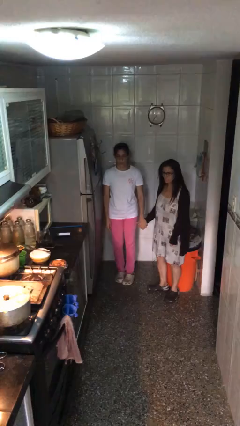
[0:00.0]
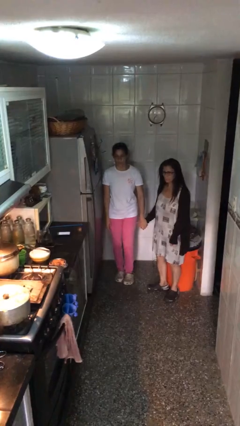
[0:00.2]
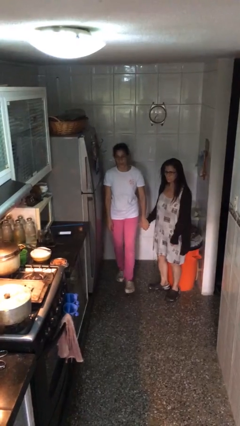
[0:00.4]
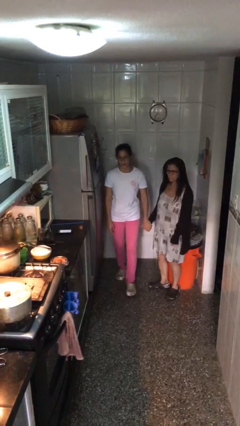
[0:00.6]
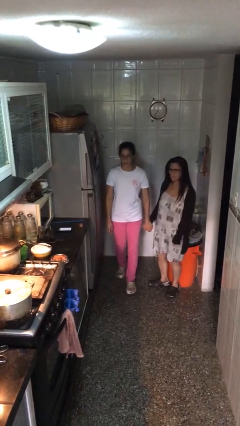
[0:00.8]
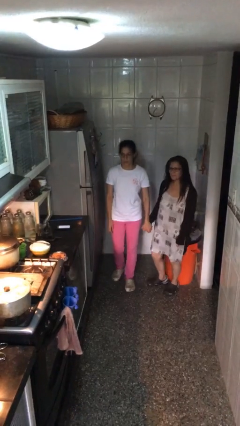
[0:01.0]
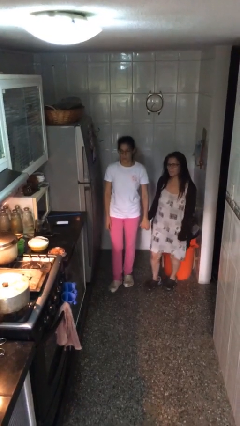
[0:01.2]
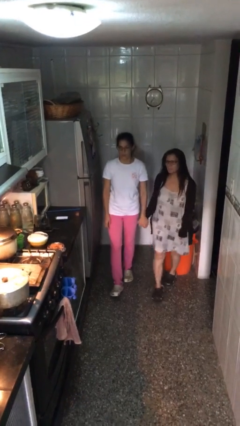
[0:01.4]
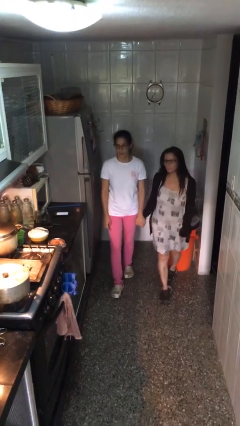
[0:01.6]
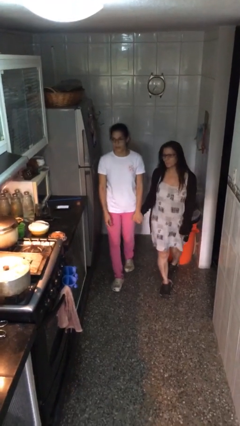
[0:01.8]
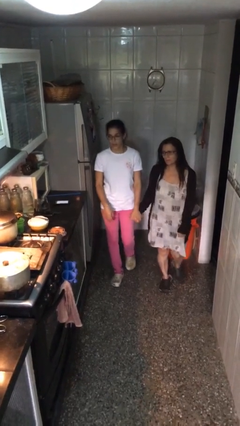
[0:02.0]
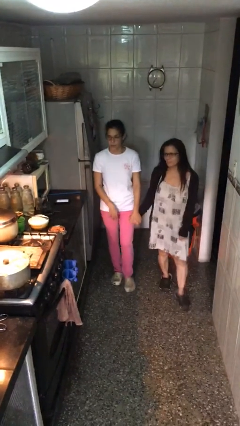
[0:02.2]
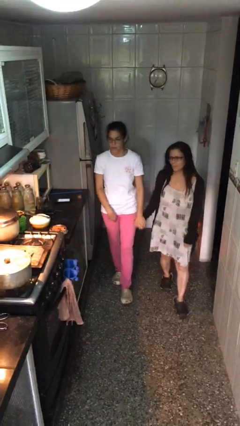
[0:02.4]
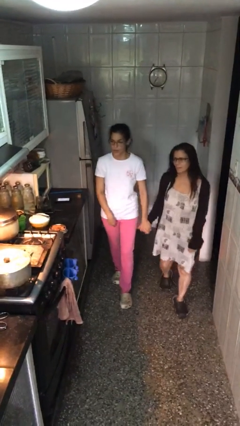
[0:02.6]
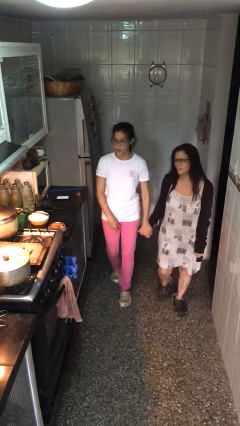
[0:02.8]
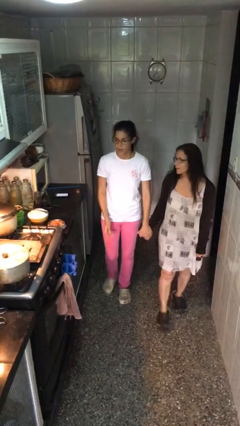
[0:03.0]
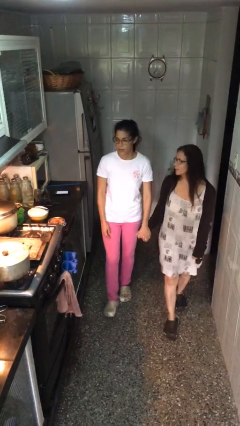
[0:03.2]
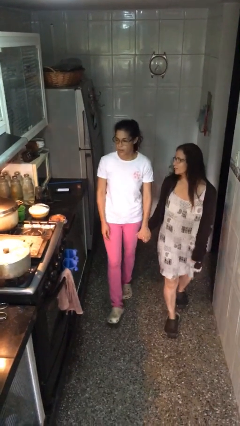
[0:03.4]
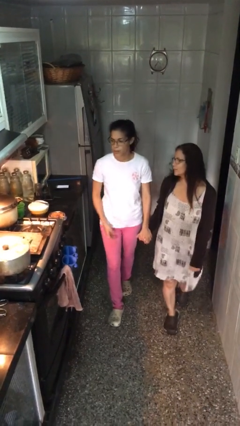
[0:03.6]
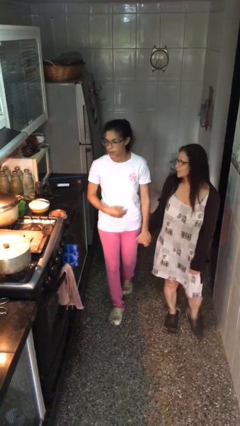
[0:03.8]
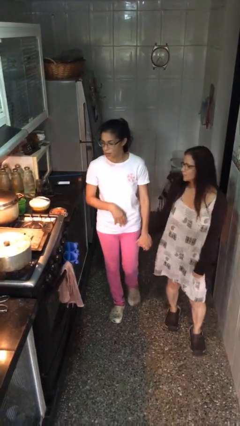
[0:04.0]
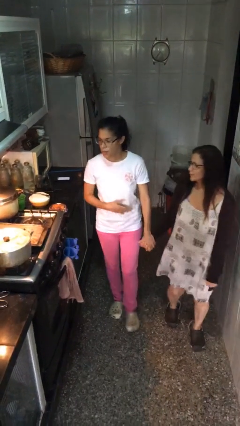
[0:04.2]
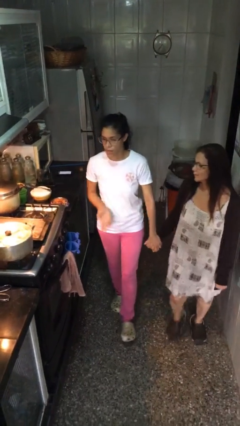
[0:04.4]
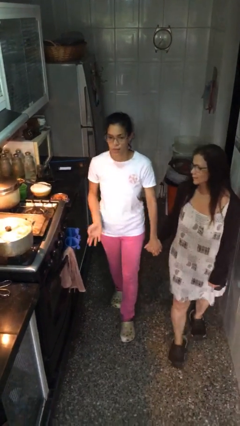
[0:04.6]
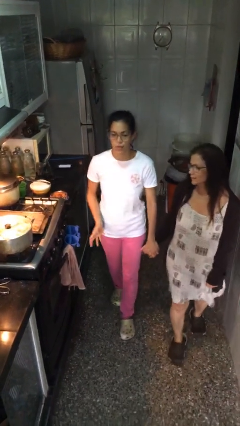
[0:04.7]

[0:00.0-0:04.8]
person holds hand

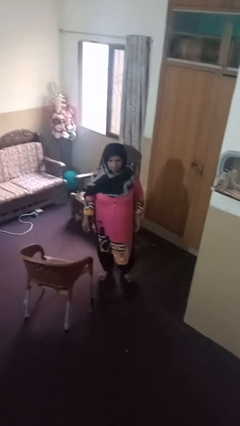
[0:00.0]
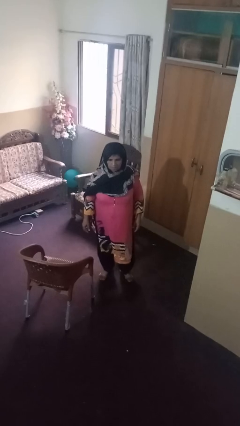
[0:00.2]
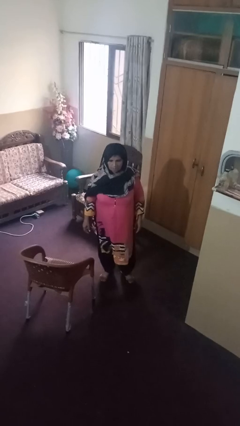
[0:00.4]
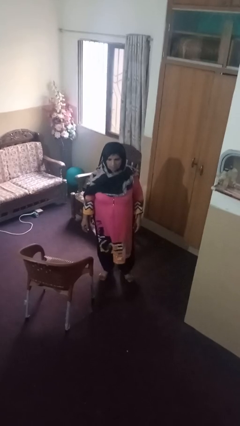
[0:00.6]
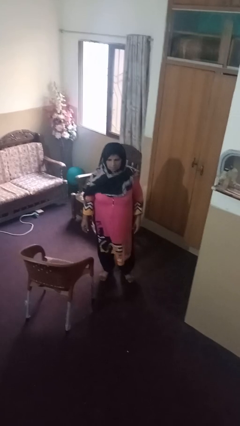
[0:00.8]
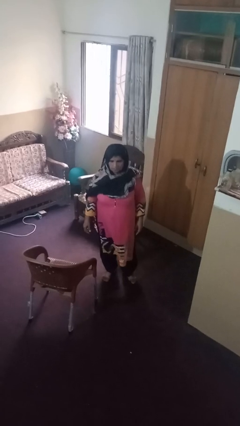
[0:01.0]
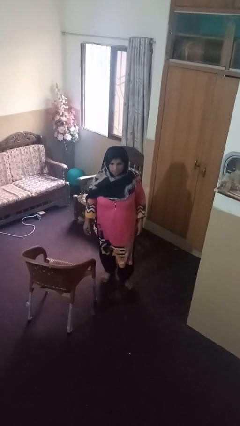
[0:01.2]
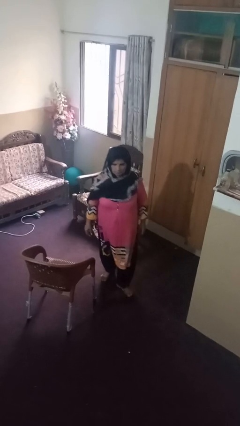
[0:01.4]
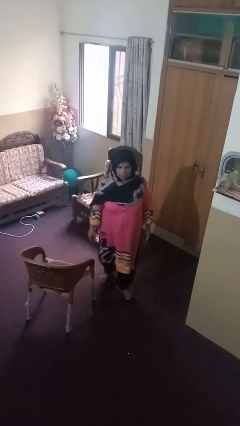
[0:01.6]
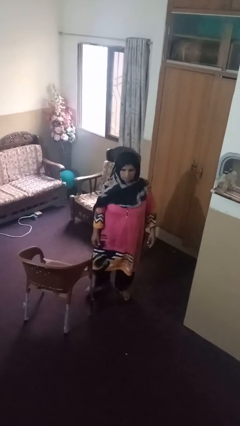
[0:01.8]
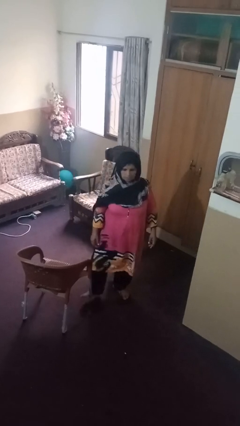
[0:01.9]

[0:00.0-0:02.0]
person trips on object on floor

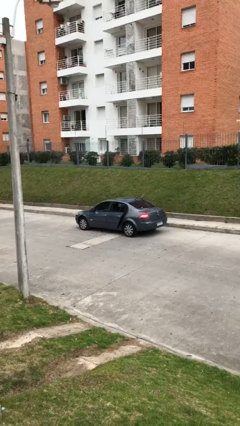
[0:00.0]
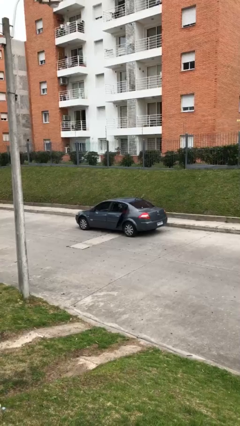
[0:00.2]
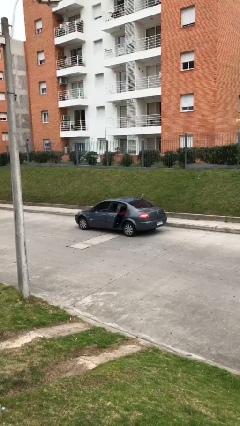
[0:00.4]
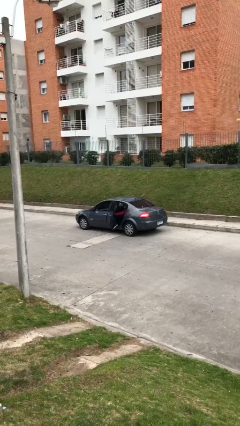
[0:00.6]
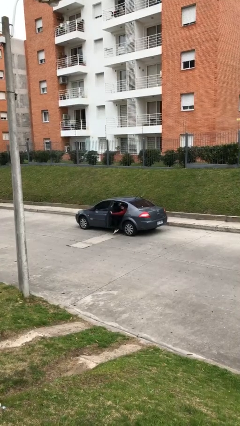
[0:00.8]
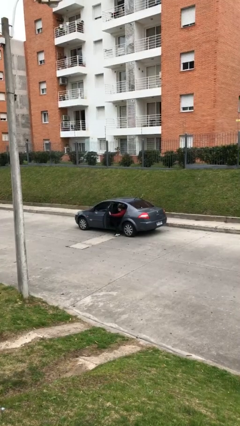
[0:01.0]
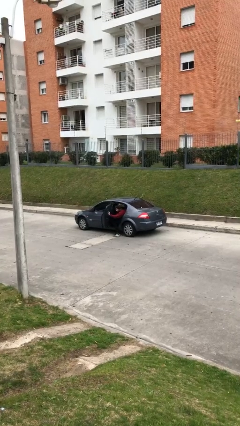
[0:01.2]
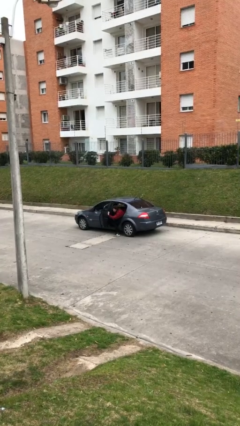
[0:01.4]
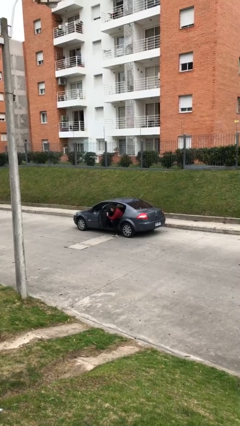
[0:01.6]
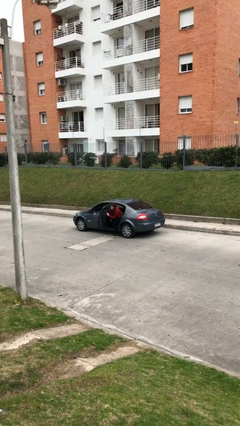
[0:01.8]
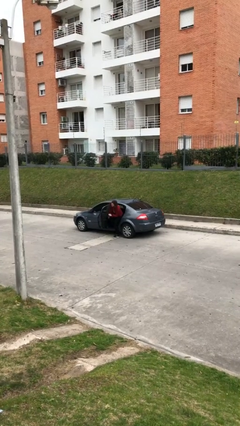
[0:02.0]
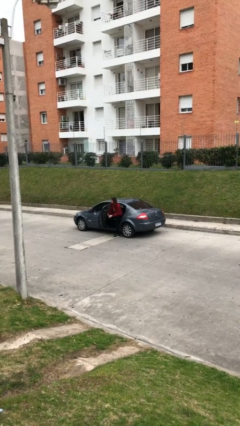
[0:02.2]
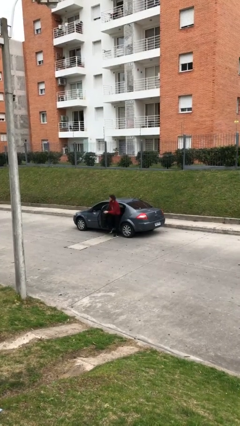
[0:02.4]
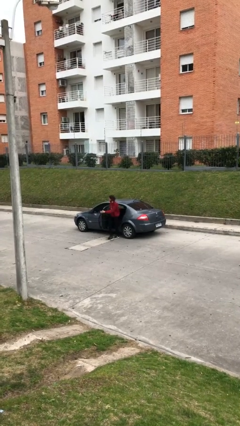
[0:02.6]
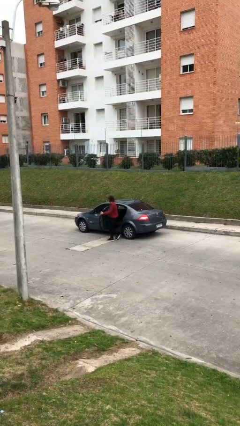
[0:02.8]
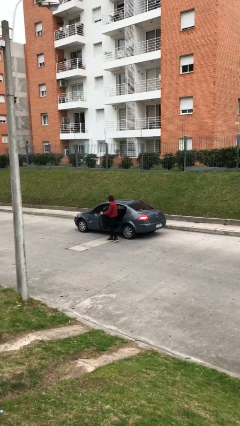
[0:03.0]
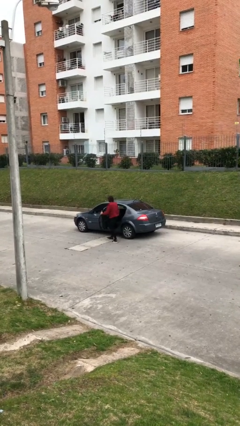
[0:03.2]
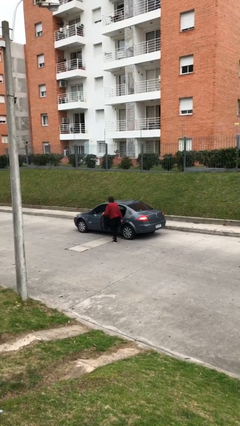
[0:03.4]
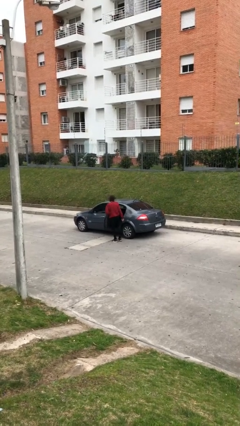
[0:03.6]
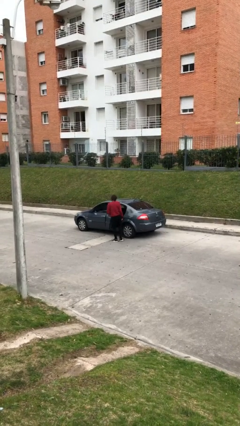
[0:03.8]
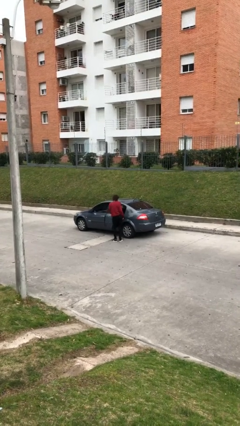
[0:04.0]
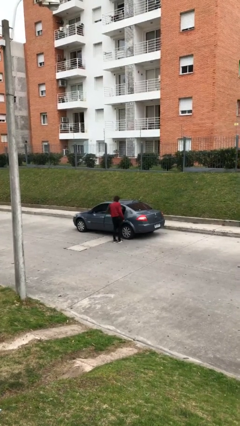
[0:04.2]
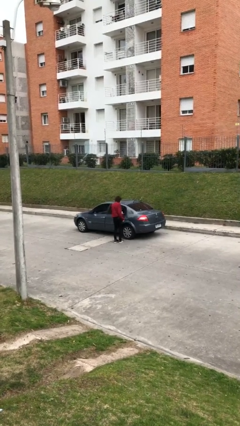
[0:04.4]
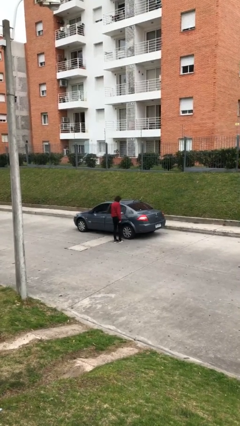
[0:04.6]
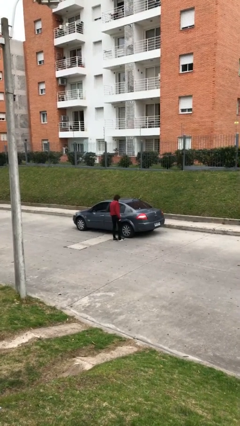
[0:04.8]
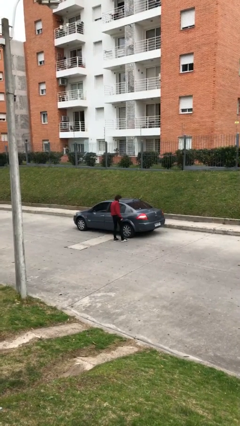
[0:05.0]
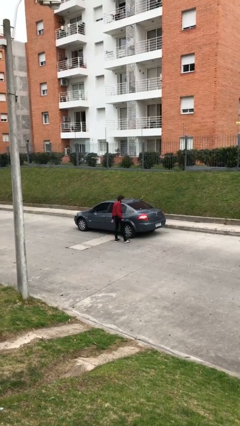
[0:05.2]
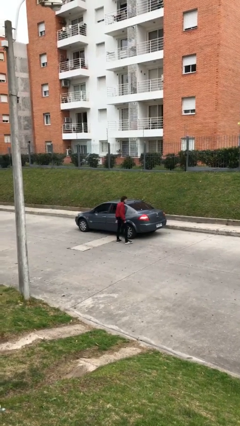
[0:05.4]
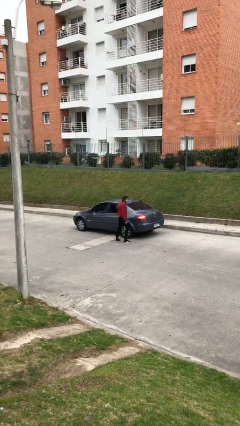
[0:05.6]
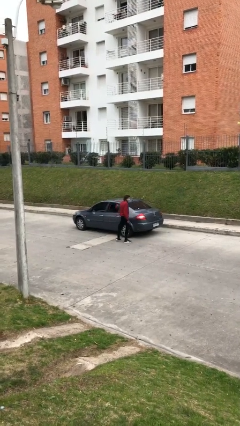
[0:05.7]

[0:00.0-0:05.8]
car drops off person

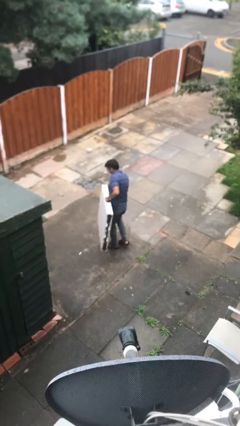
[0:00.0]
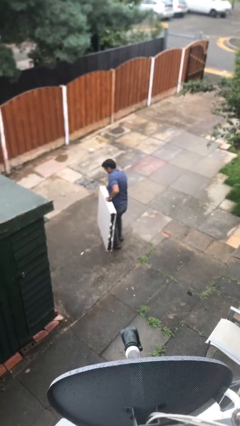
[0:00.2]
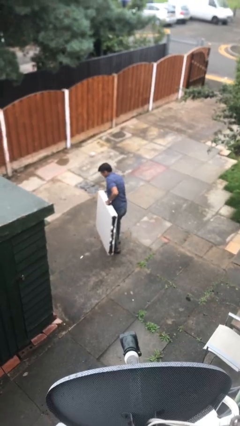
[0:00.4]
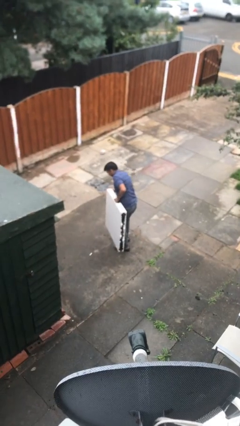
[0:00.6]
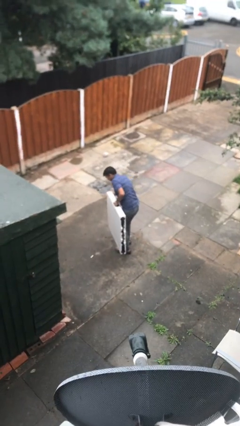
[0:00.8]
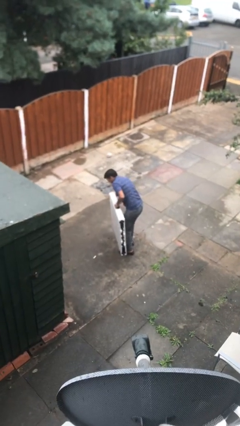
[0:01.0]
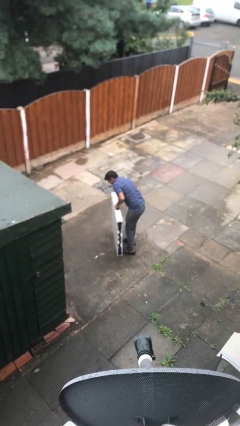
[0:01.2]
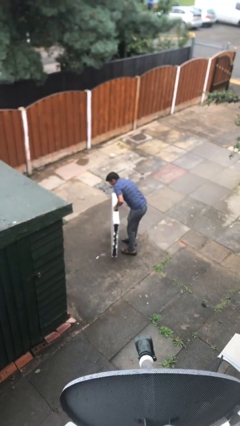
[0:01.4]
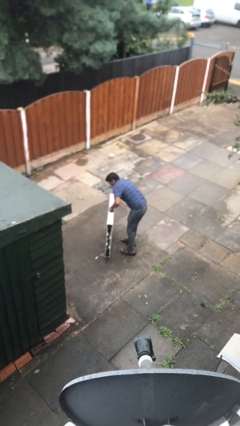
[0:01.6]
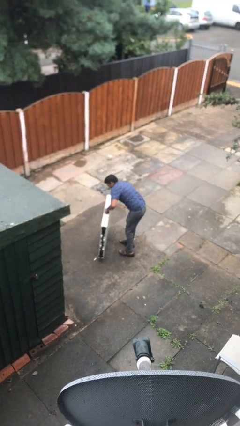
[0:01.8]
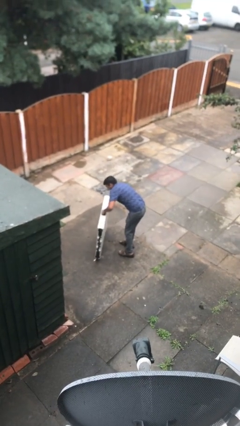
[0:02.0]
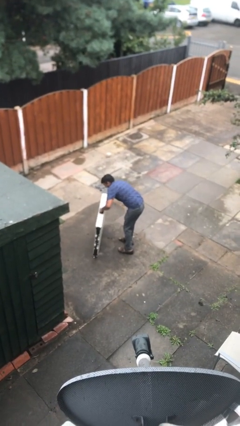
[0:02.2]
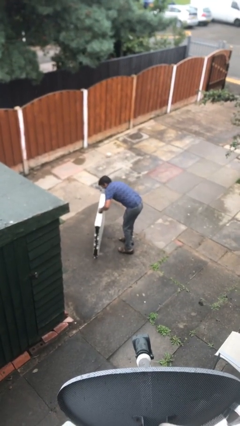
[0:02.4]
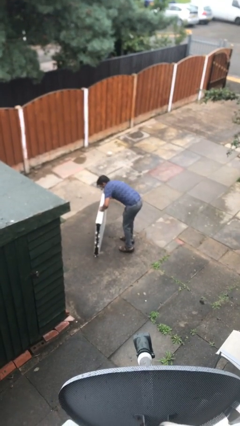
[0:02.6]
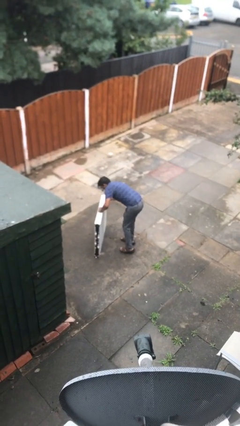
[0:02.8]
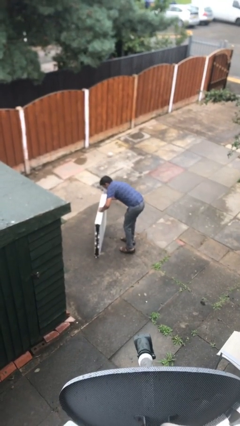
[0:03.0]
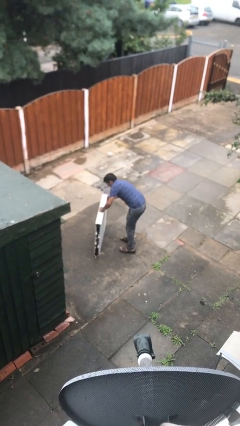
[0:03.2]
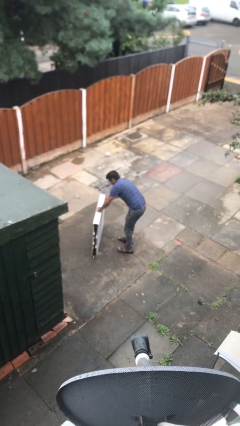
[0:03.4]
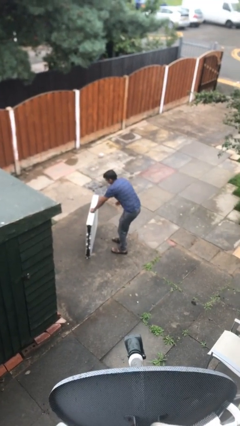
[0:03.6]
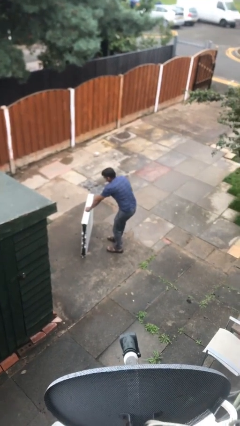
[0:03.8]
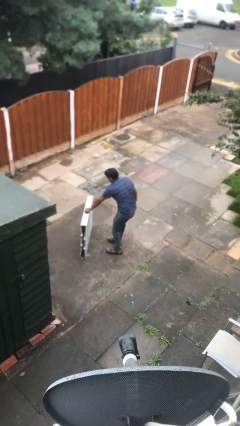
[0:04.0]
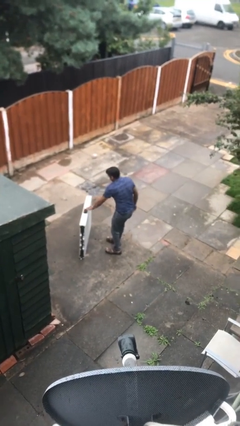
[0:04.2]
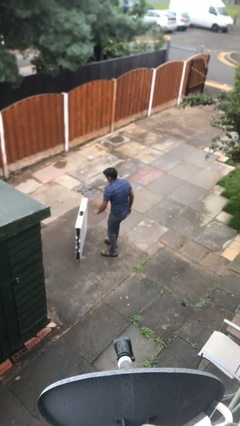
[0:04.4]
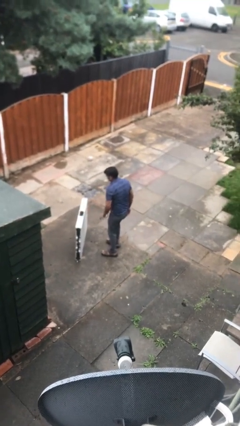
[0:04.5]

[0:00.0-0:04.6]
person puts down object on floor

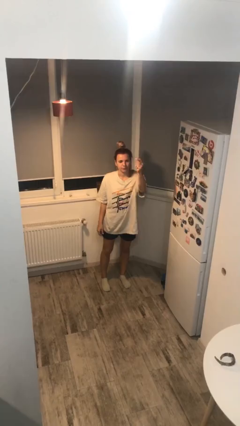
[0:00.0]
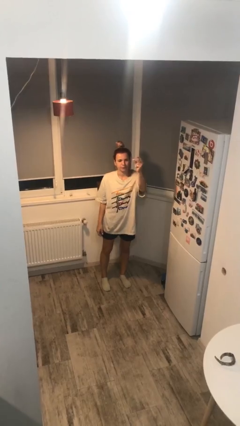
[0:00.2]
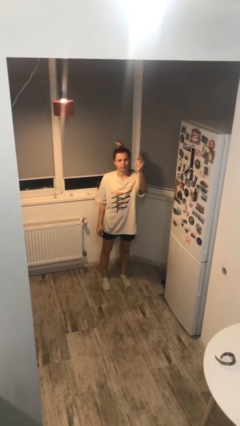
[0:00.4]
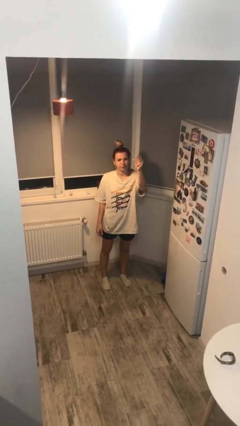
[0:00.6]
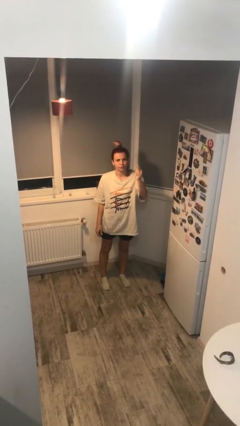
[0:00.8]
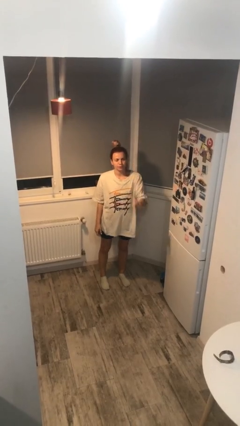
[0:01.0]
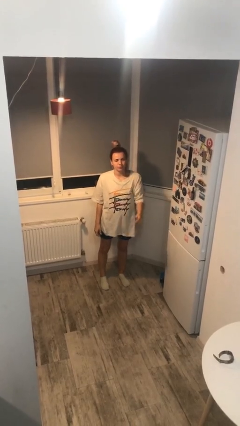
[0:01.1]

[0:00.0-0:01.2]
person snaps fingers
